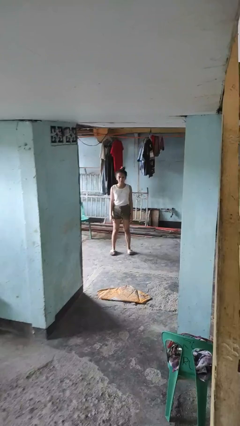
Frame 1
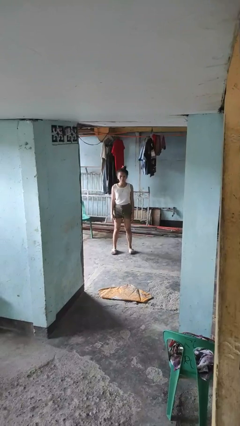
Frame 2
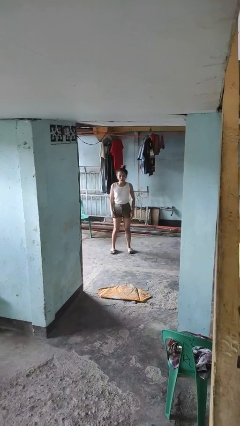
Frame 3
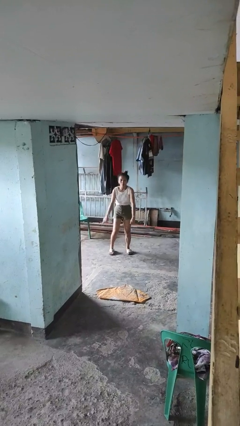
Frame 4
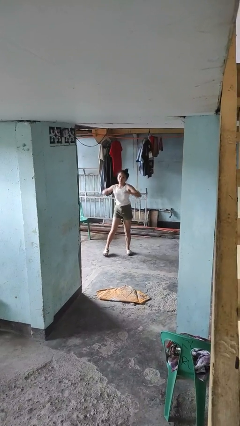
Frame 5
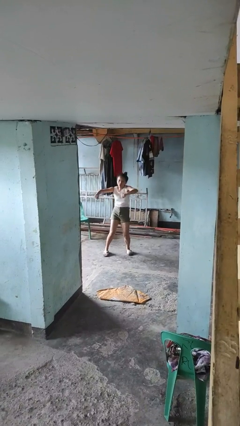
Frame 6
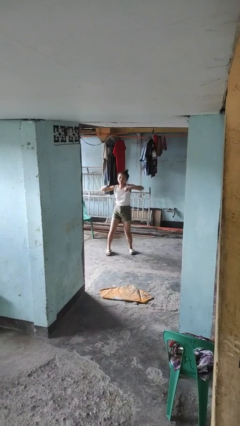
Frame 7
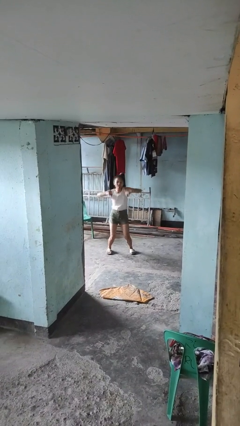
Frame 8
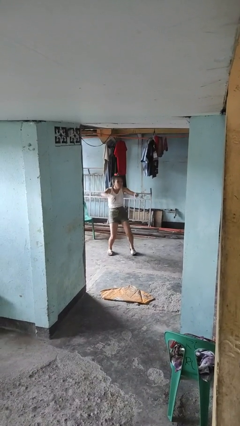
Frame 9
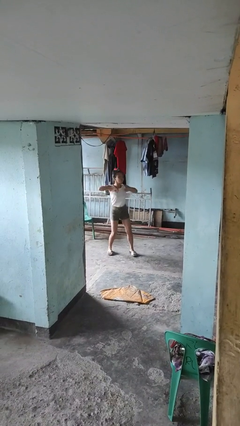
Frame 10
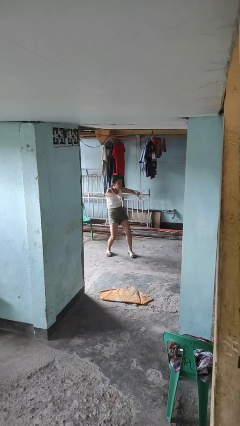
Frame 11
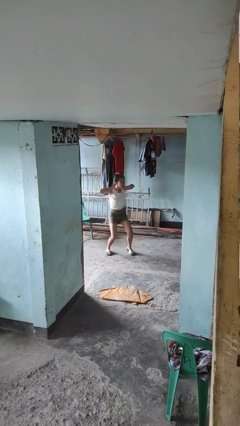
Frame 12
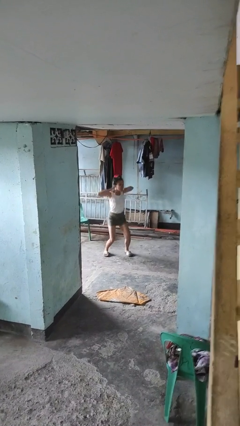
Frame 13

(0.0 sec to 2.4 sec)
person dances in place

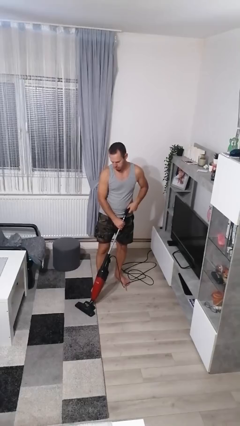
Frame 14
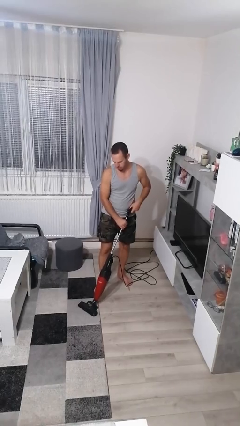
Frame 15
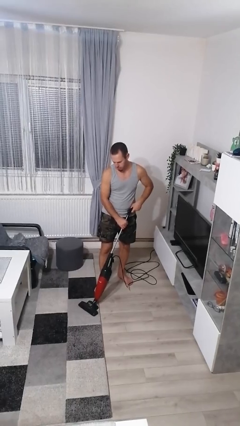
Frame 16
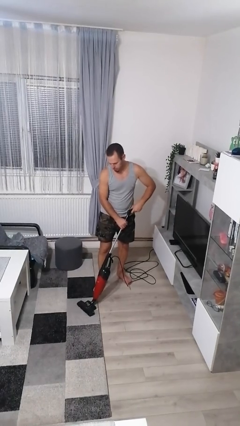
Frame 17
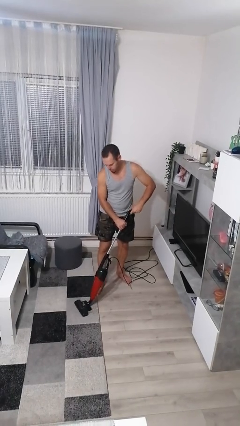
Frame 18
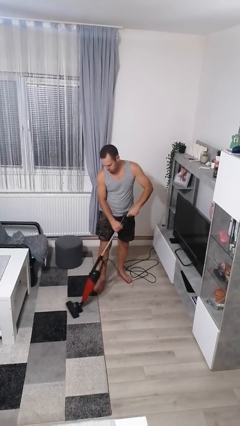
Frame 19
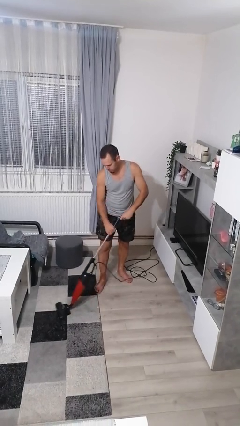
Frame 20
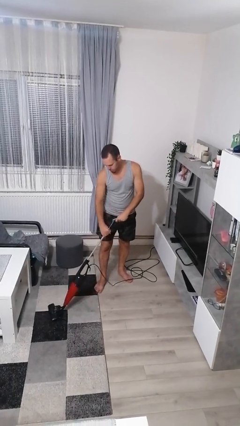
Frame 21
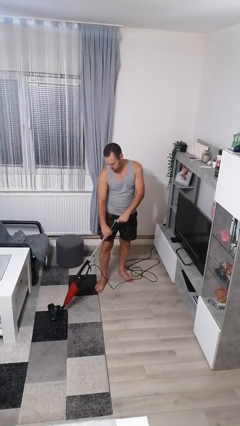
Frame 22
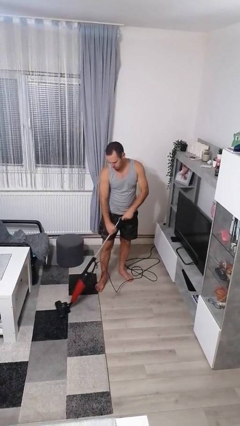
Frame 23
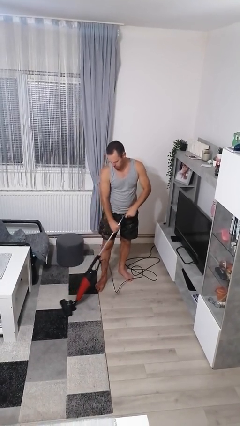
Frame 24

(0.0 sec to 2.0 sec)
person vacuums carpet

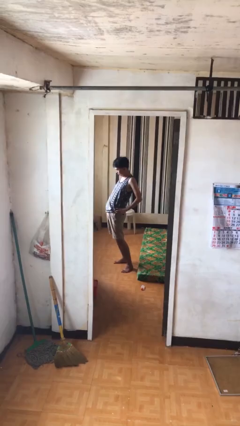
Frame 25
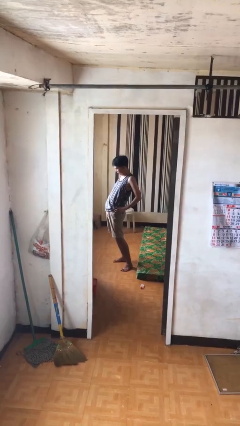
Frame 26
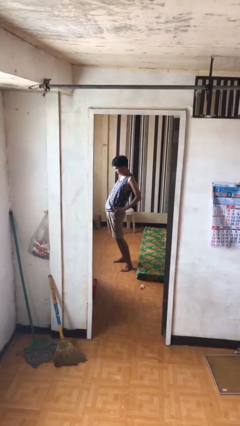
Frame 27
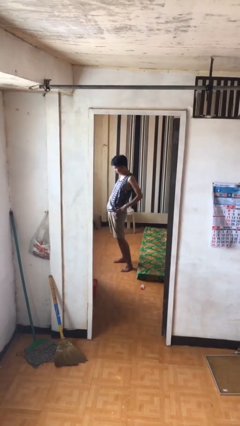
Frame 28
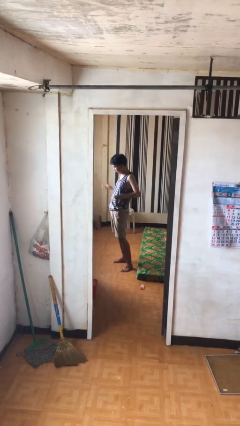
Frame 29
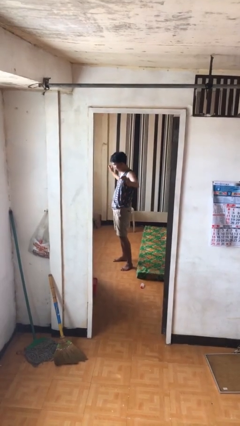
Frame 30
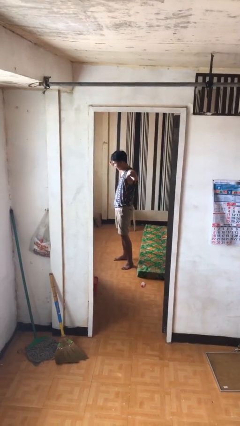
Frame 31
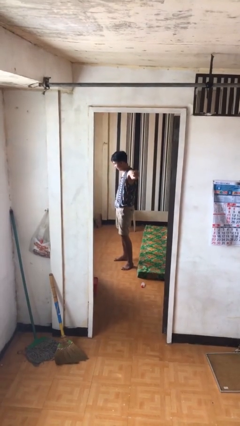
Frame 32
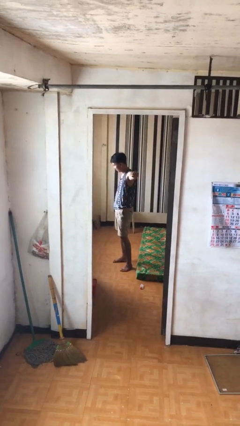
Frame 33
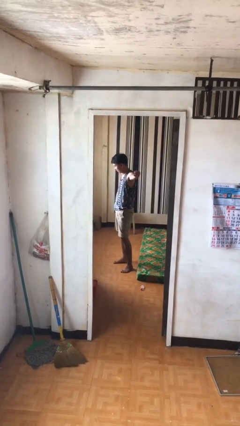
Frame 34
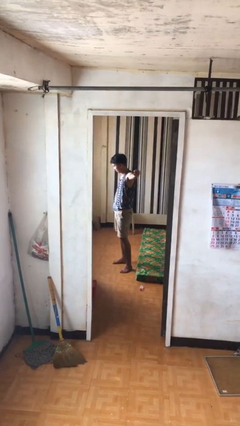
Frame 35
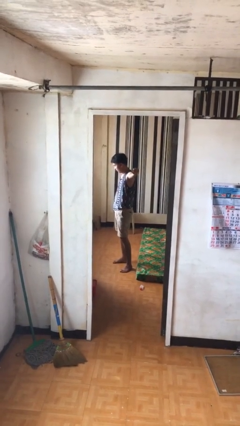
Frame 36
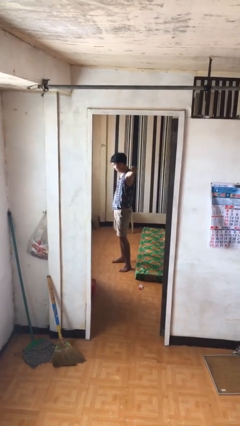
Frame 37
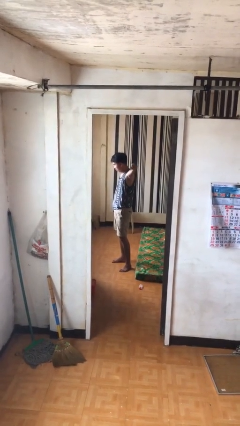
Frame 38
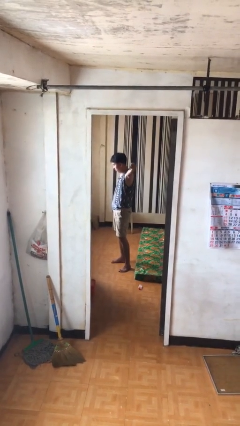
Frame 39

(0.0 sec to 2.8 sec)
person stretches arms to side

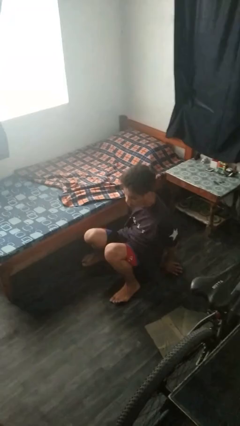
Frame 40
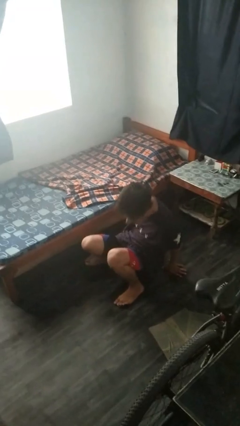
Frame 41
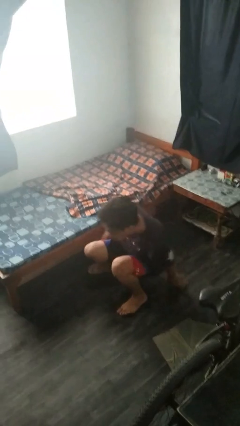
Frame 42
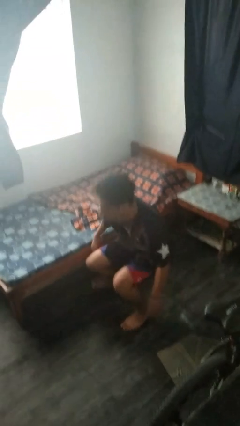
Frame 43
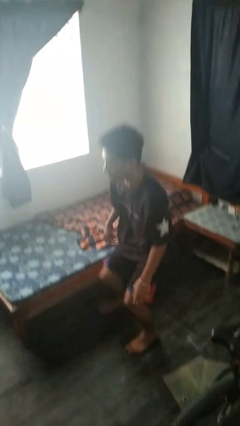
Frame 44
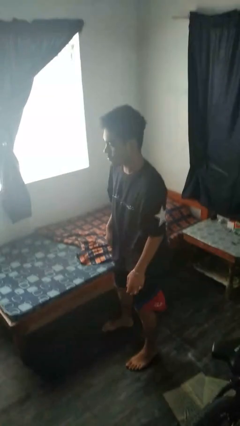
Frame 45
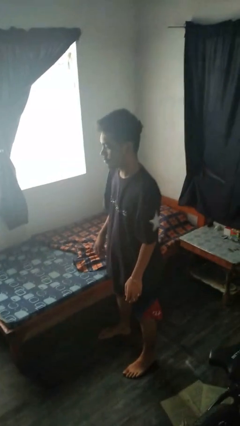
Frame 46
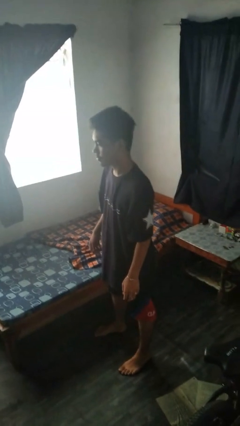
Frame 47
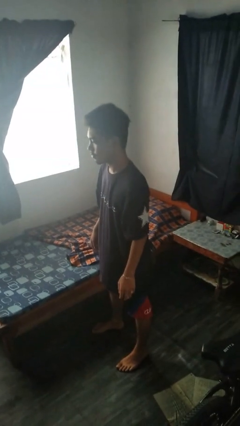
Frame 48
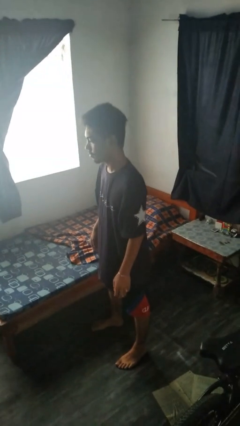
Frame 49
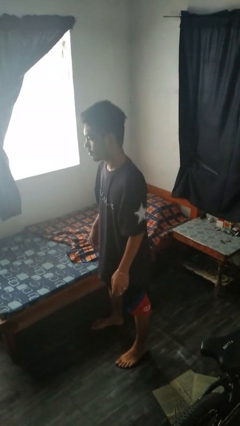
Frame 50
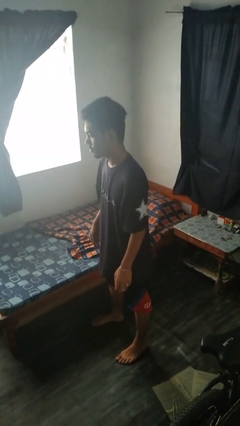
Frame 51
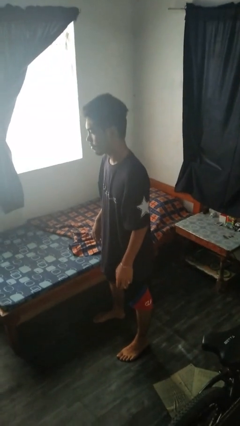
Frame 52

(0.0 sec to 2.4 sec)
person stands up from floor

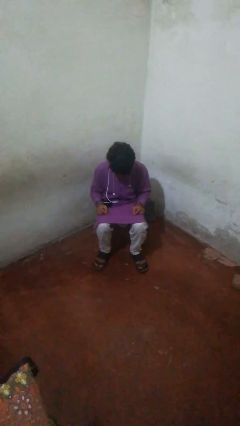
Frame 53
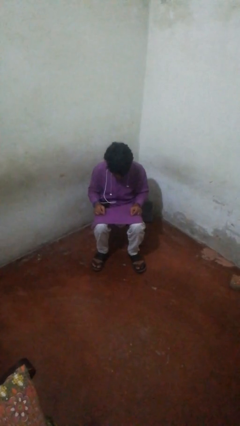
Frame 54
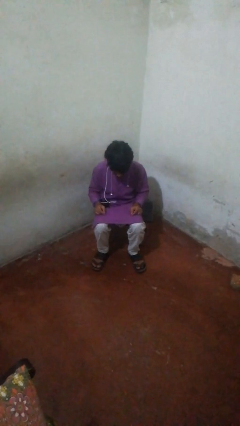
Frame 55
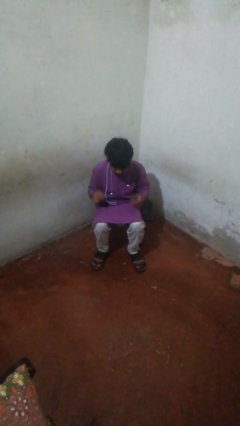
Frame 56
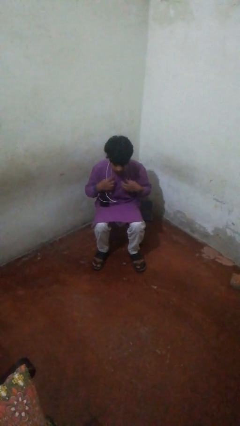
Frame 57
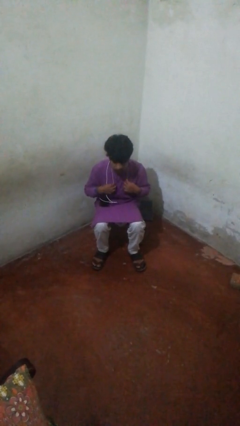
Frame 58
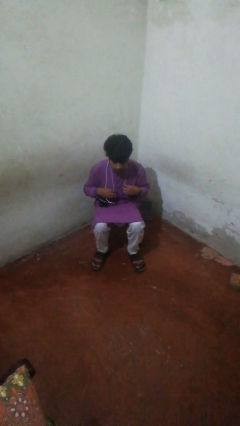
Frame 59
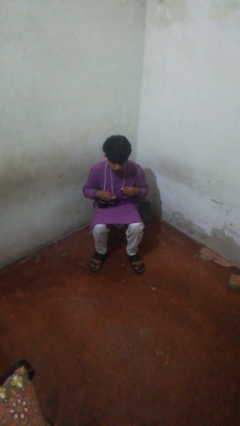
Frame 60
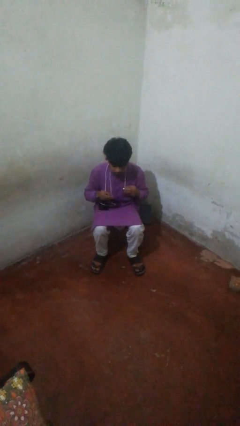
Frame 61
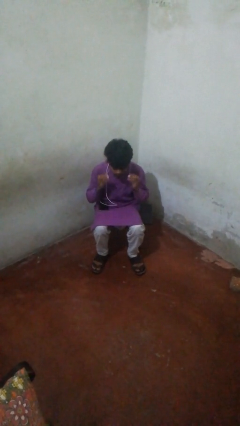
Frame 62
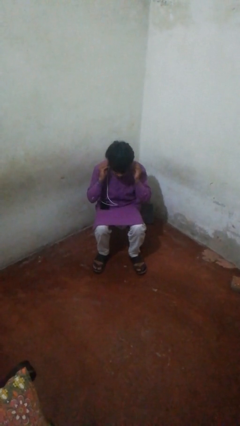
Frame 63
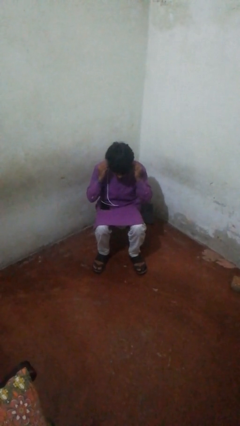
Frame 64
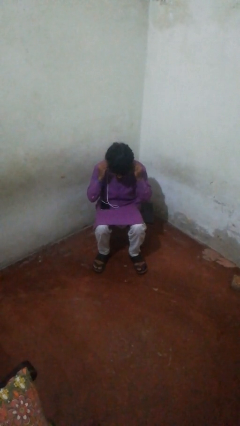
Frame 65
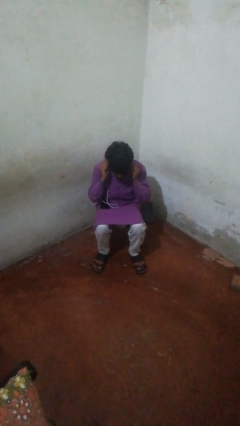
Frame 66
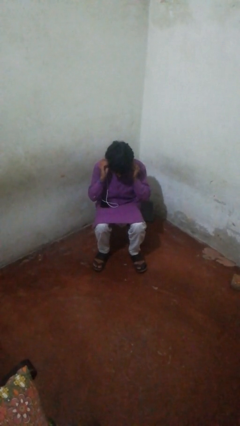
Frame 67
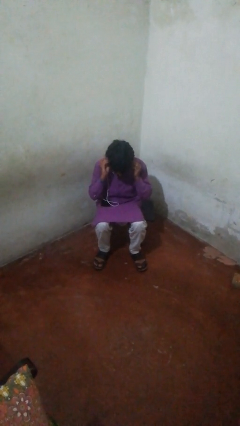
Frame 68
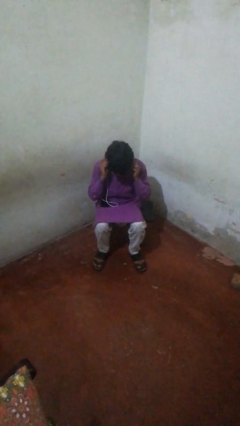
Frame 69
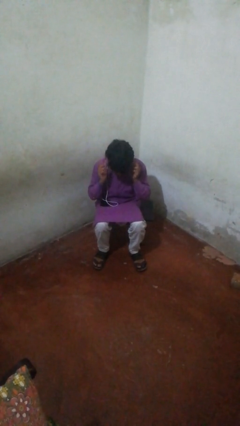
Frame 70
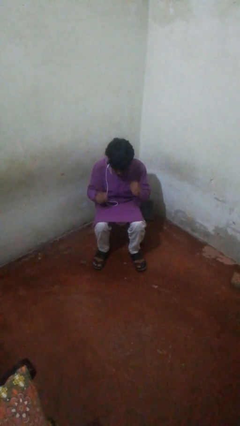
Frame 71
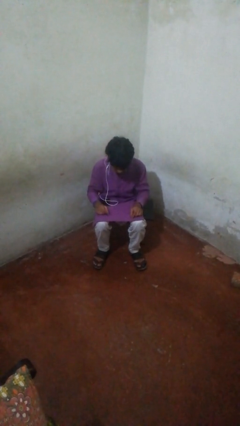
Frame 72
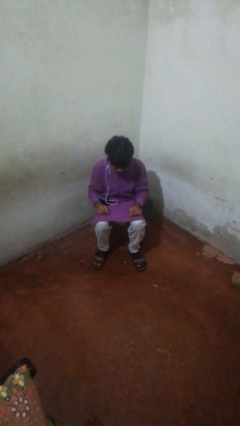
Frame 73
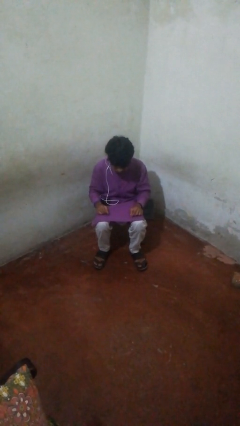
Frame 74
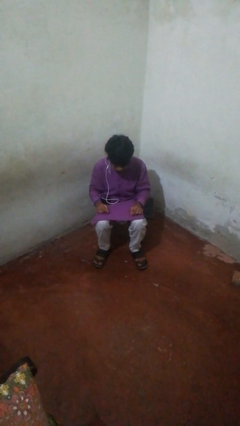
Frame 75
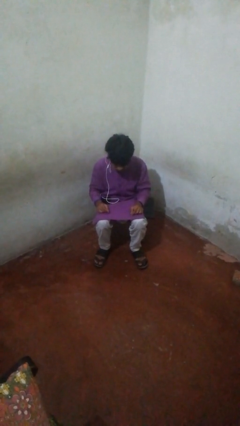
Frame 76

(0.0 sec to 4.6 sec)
person puts on headphones

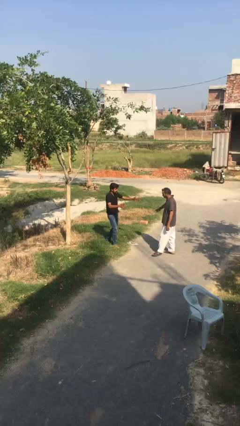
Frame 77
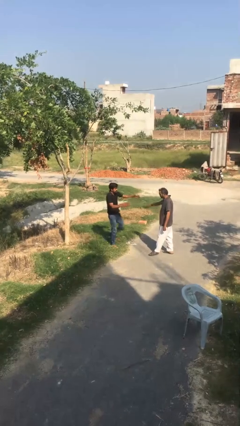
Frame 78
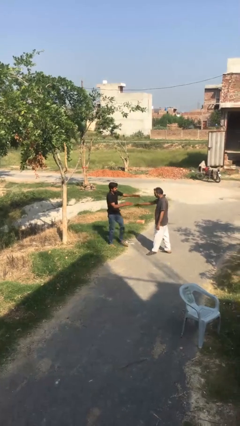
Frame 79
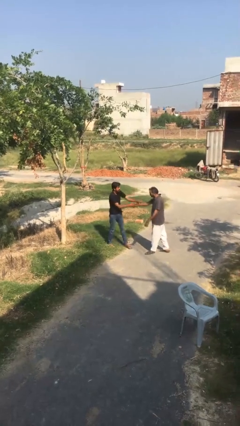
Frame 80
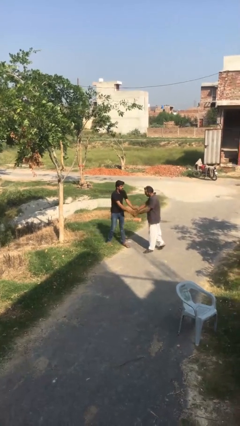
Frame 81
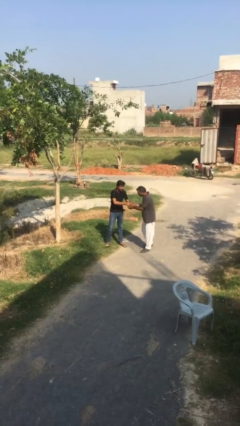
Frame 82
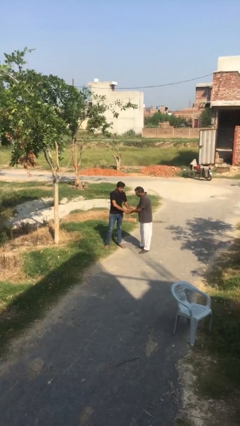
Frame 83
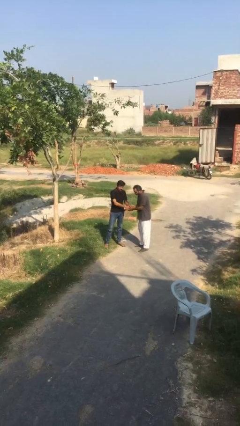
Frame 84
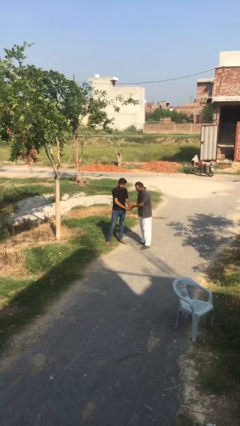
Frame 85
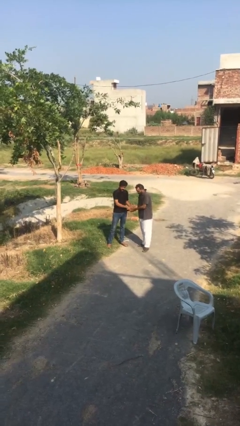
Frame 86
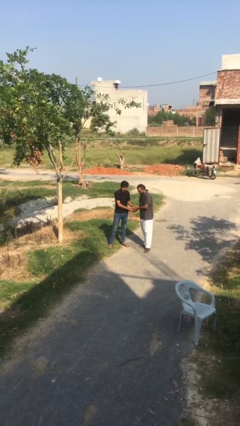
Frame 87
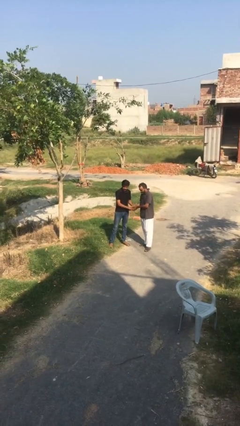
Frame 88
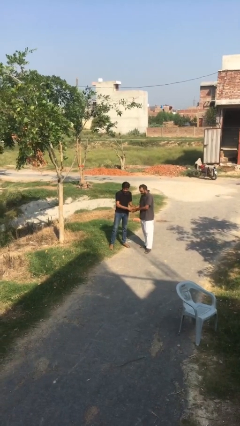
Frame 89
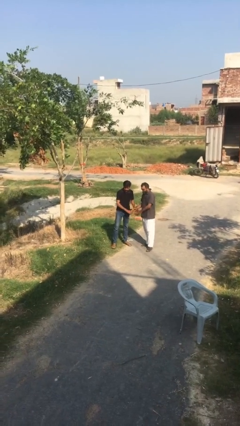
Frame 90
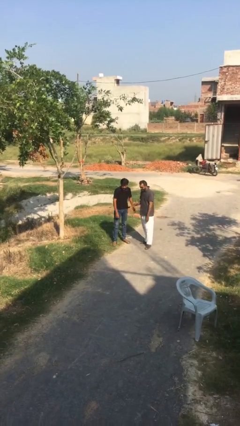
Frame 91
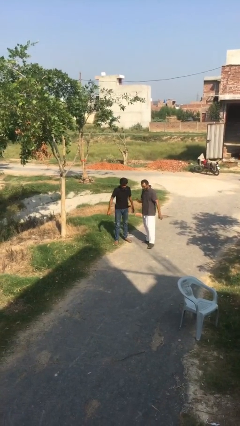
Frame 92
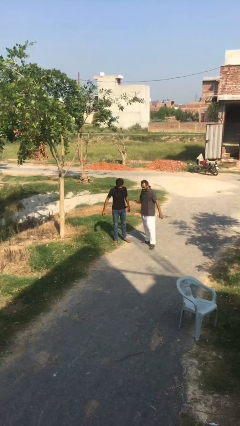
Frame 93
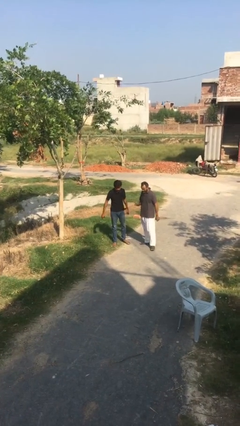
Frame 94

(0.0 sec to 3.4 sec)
person shakes hand
